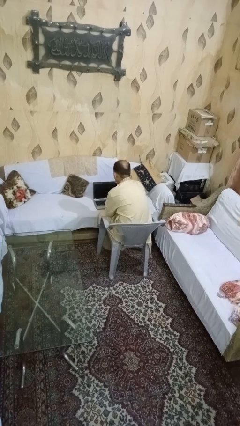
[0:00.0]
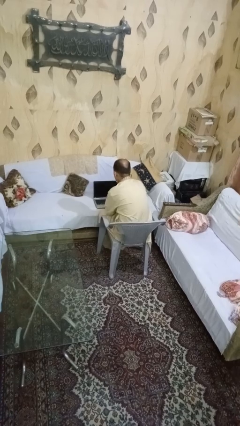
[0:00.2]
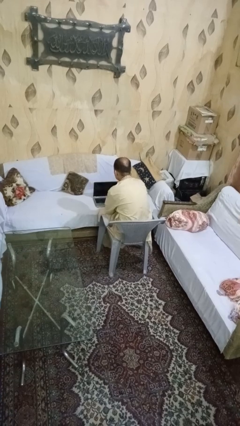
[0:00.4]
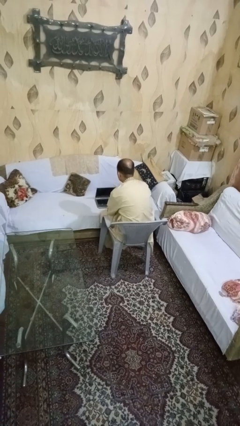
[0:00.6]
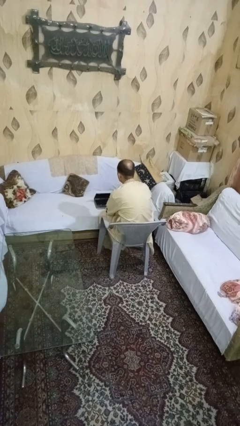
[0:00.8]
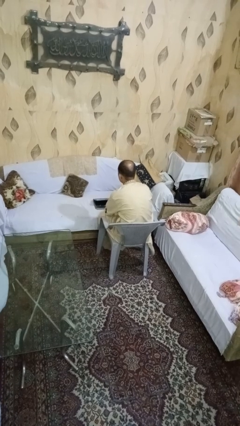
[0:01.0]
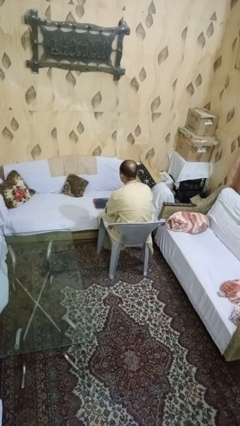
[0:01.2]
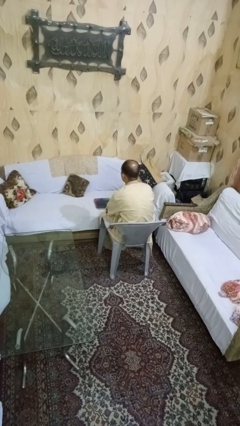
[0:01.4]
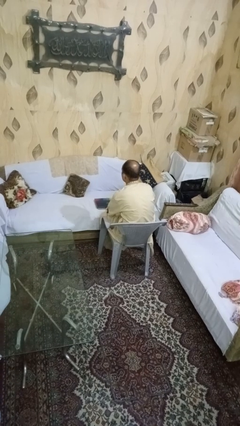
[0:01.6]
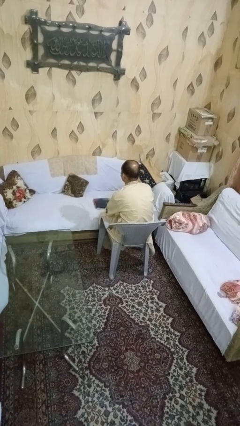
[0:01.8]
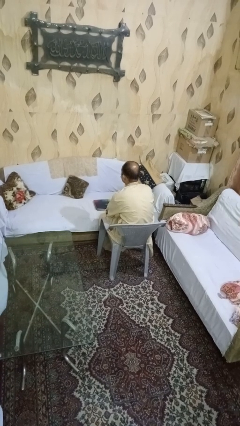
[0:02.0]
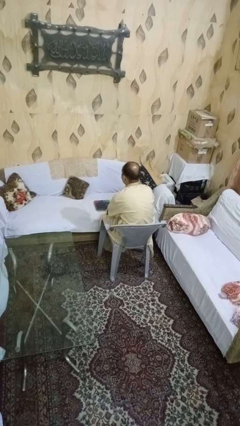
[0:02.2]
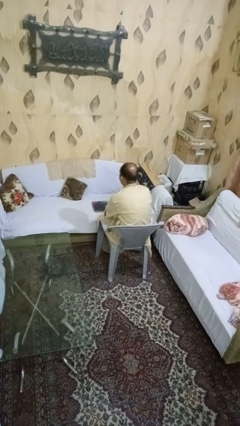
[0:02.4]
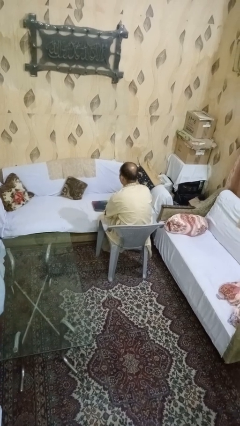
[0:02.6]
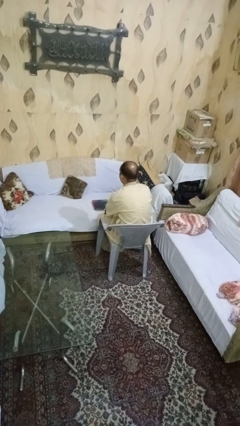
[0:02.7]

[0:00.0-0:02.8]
person closes laptop

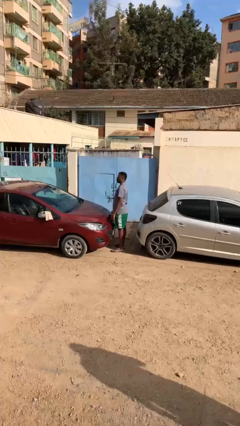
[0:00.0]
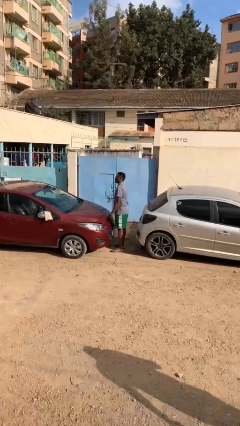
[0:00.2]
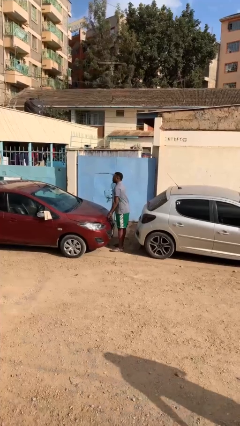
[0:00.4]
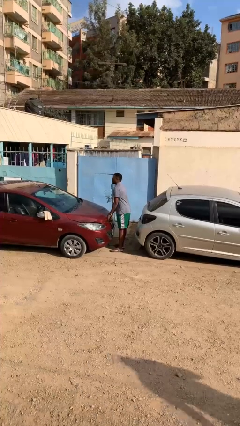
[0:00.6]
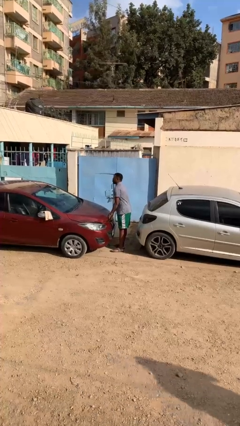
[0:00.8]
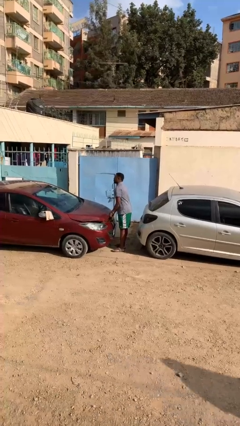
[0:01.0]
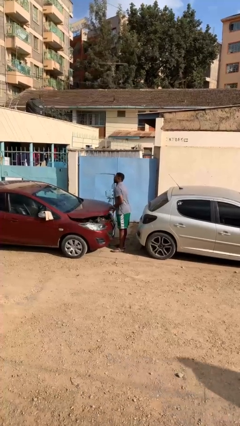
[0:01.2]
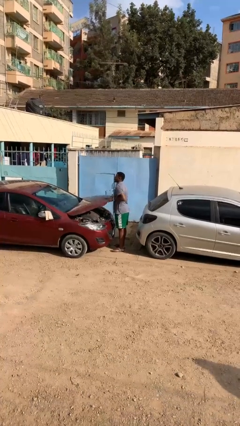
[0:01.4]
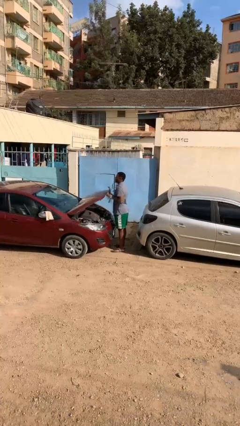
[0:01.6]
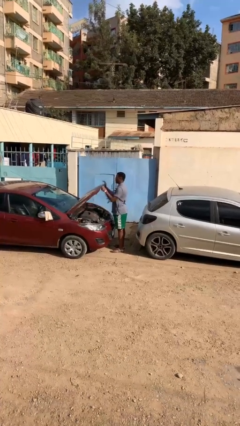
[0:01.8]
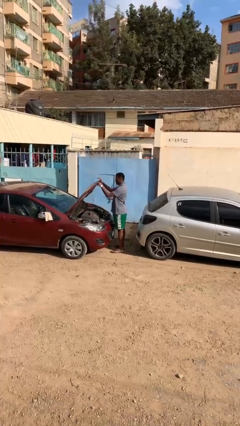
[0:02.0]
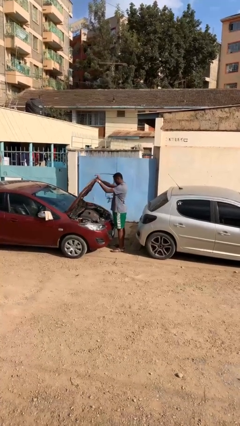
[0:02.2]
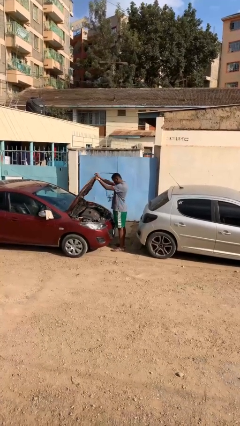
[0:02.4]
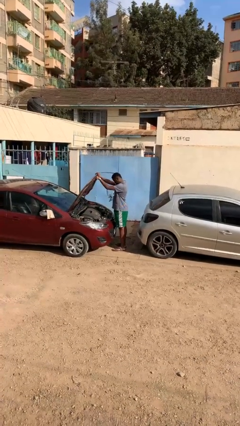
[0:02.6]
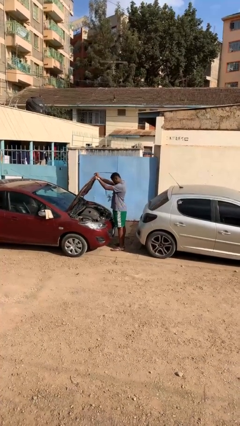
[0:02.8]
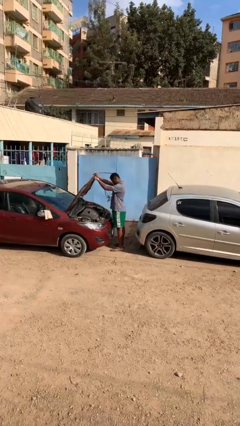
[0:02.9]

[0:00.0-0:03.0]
person opens car hood

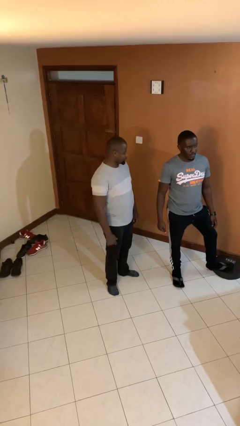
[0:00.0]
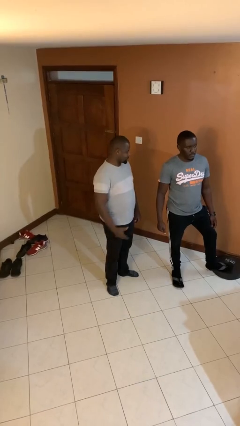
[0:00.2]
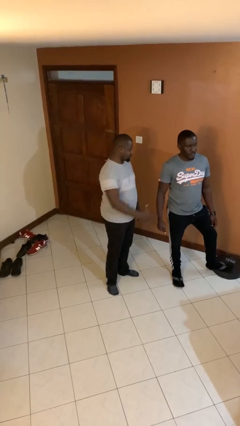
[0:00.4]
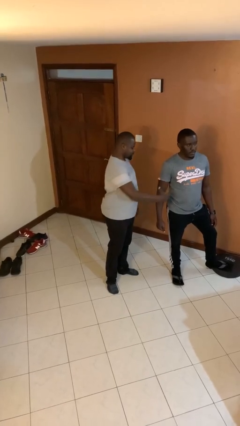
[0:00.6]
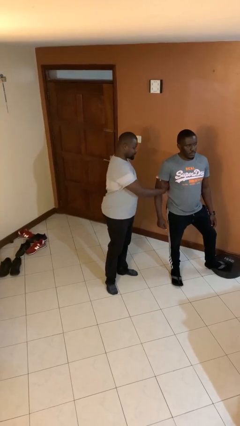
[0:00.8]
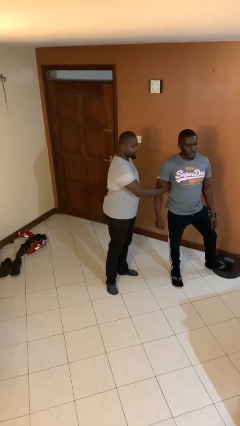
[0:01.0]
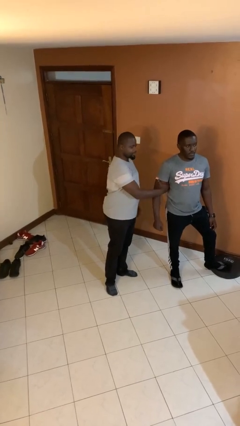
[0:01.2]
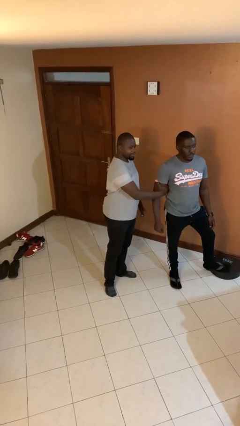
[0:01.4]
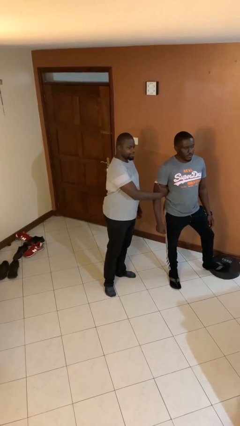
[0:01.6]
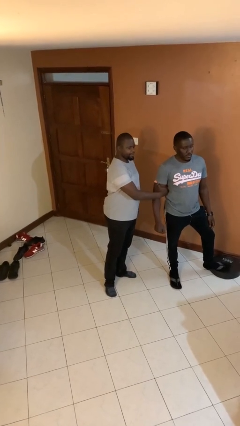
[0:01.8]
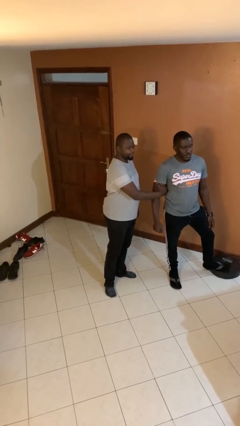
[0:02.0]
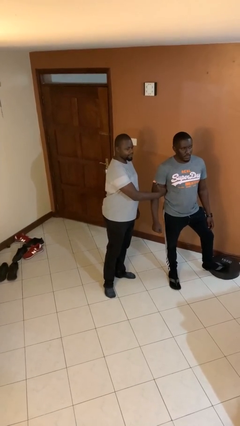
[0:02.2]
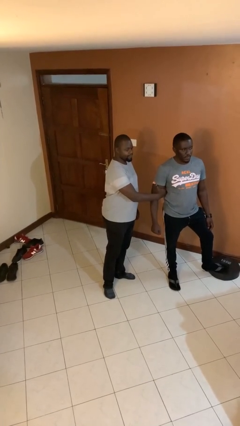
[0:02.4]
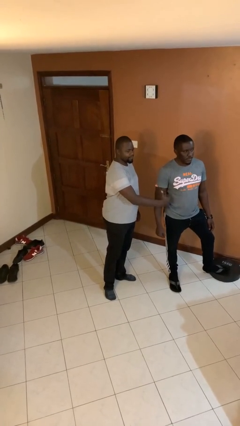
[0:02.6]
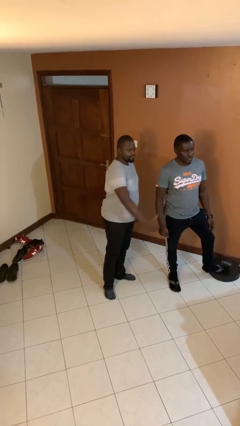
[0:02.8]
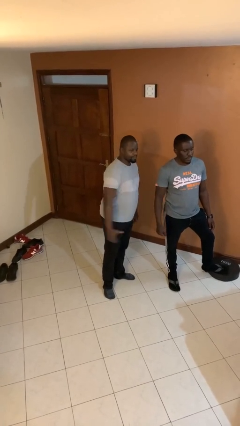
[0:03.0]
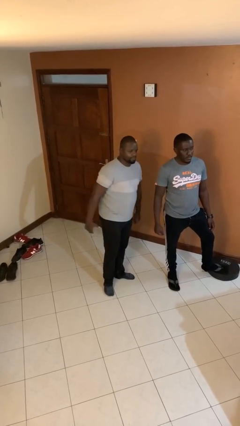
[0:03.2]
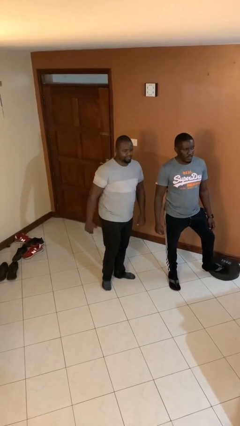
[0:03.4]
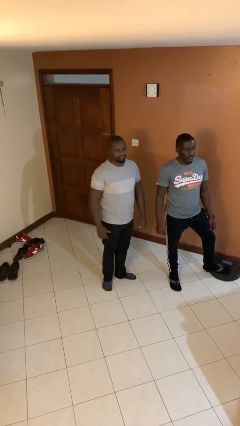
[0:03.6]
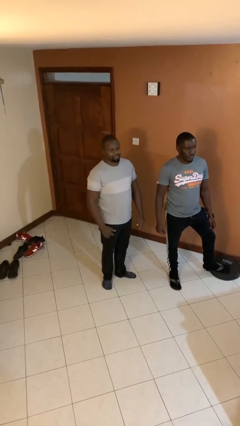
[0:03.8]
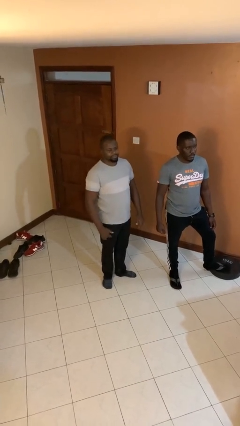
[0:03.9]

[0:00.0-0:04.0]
person grabs person by bicep

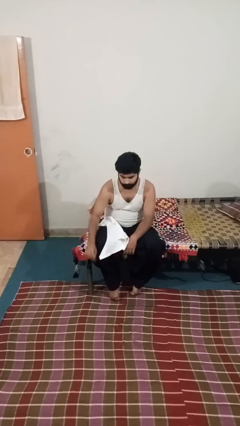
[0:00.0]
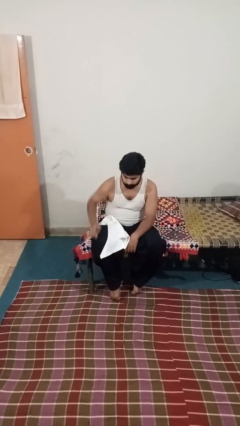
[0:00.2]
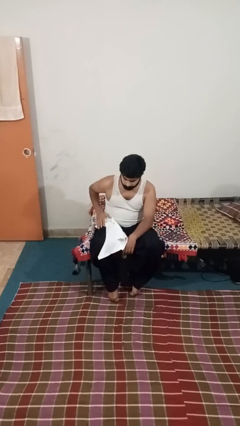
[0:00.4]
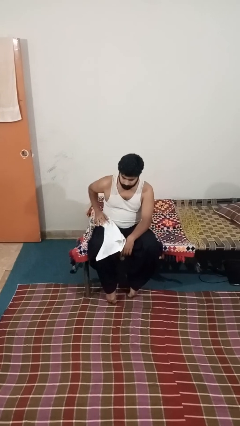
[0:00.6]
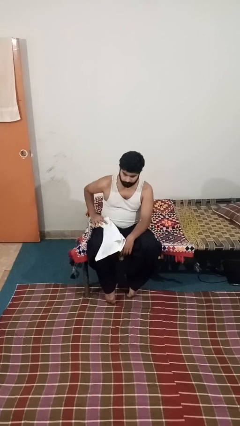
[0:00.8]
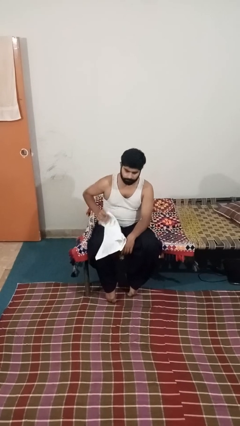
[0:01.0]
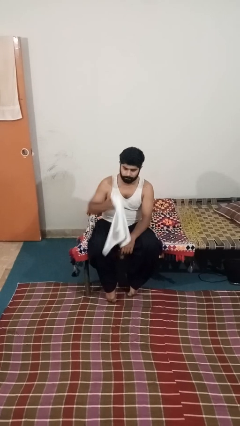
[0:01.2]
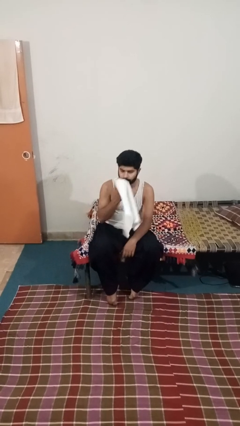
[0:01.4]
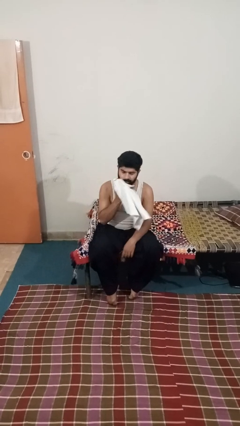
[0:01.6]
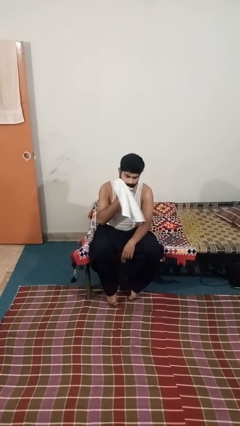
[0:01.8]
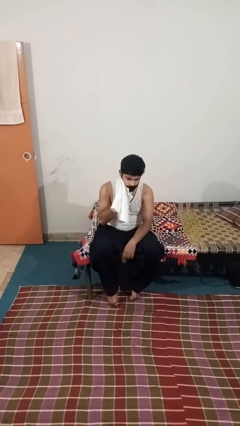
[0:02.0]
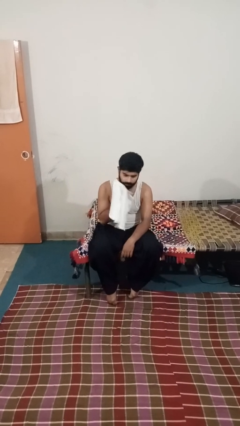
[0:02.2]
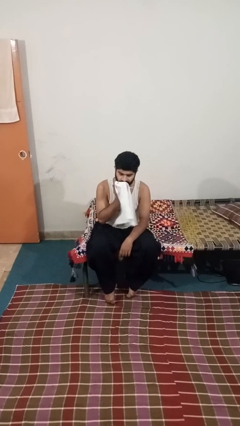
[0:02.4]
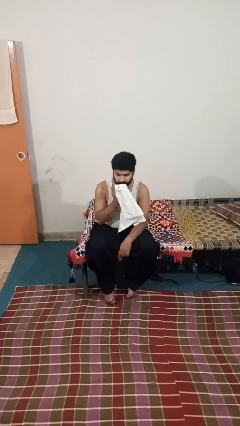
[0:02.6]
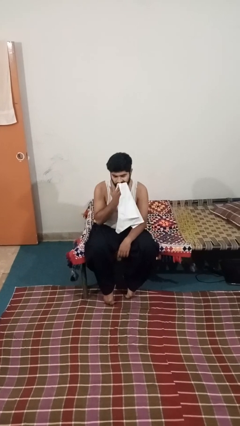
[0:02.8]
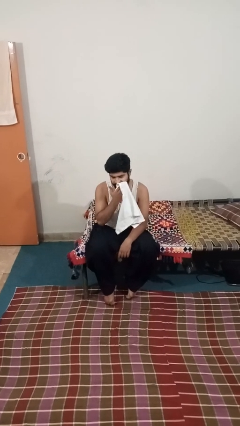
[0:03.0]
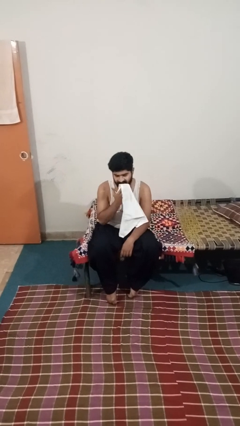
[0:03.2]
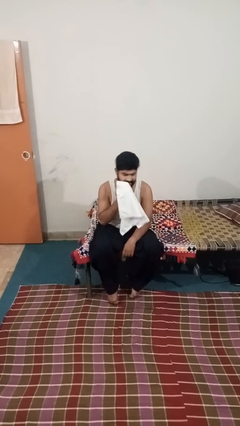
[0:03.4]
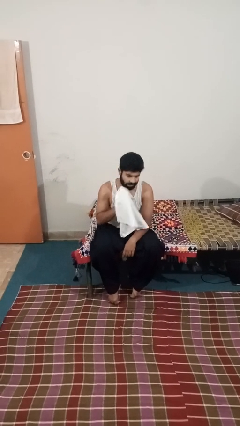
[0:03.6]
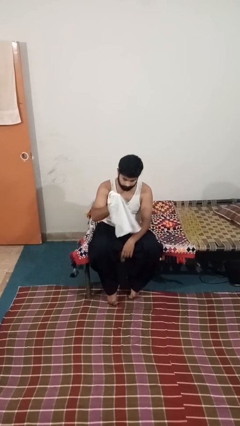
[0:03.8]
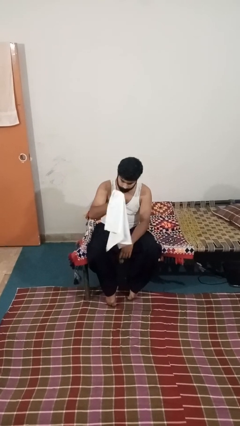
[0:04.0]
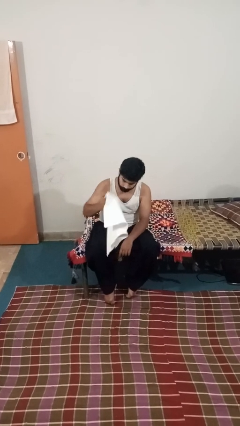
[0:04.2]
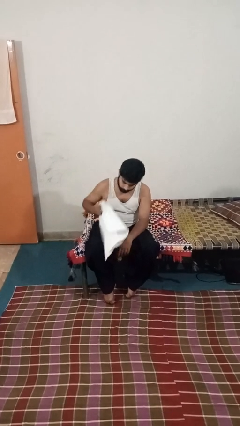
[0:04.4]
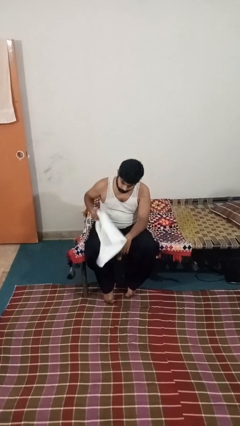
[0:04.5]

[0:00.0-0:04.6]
person wipes mouth with napkin

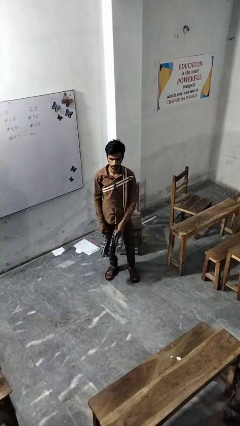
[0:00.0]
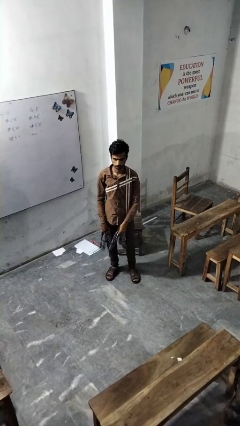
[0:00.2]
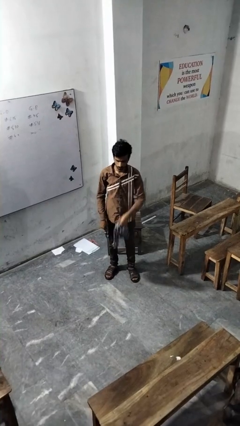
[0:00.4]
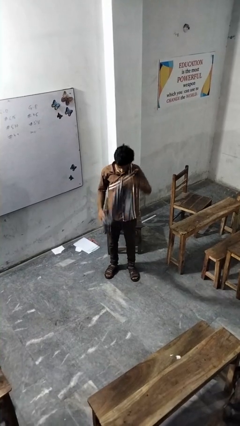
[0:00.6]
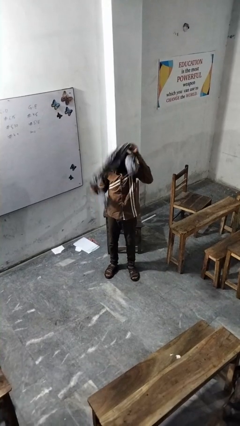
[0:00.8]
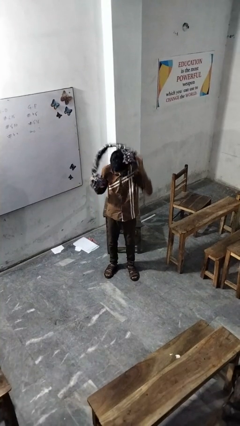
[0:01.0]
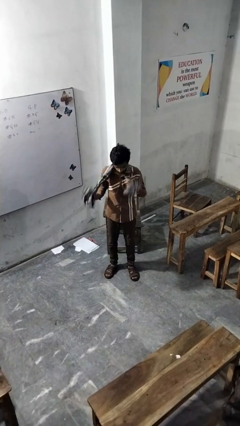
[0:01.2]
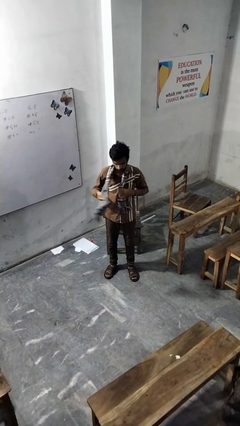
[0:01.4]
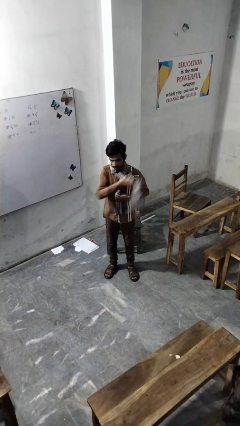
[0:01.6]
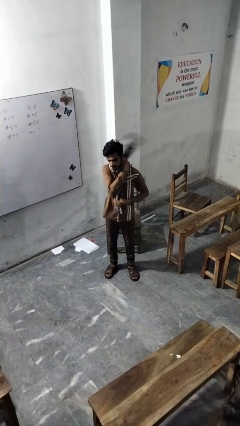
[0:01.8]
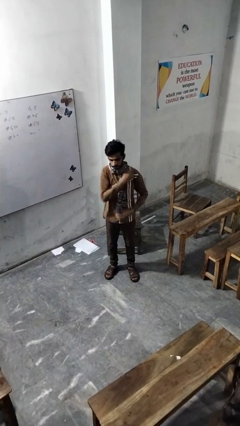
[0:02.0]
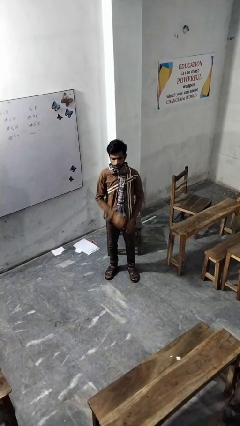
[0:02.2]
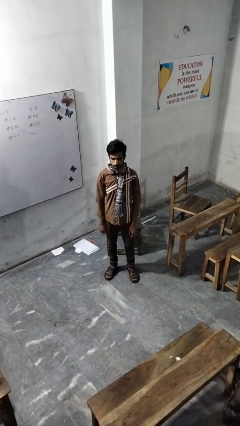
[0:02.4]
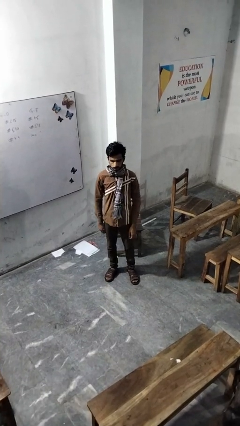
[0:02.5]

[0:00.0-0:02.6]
person puts on scarf

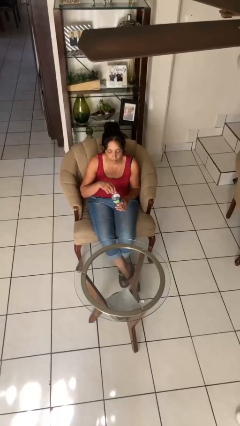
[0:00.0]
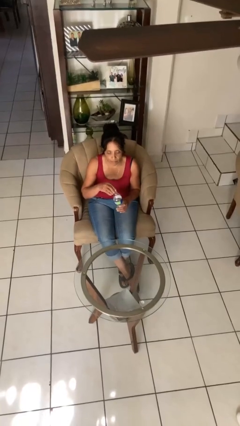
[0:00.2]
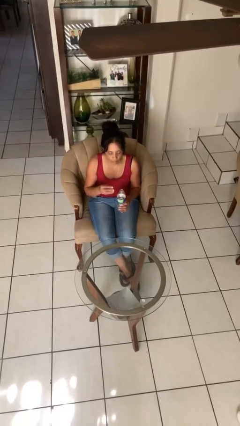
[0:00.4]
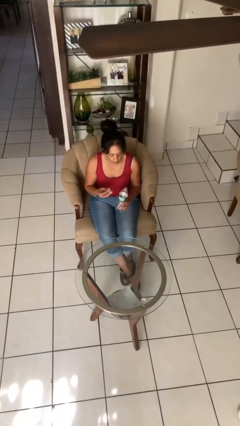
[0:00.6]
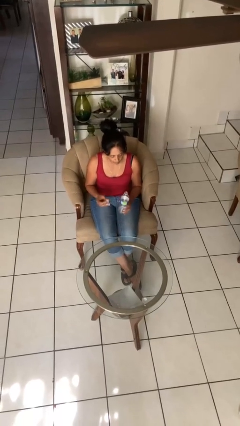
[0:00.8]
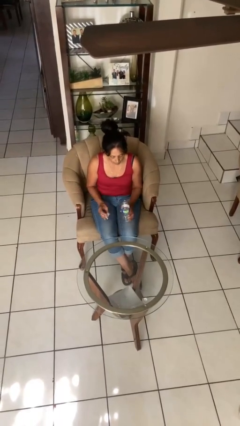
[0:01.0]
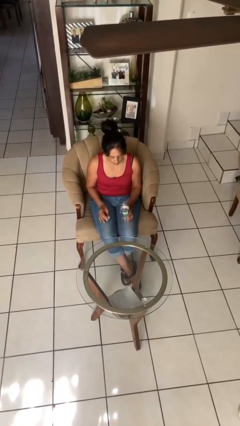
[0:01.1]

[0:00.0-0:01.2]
person unscrews lid from bottle
